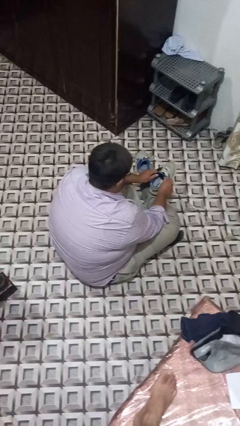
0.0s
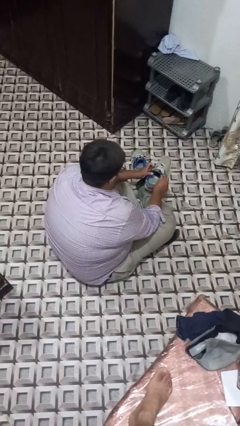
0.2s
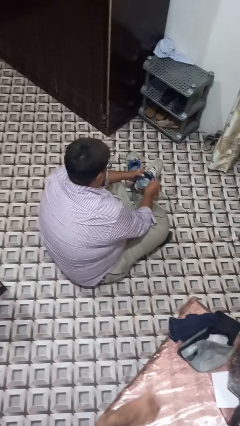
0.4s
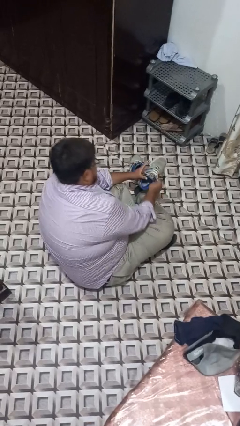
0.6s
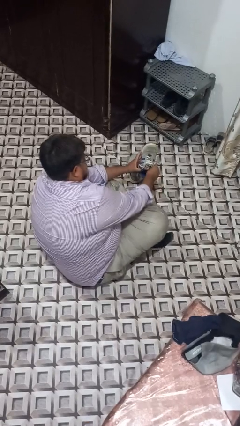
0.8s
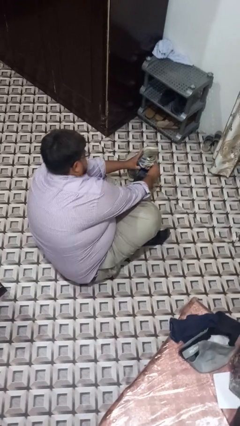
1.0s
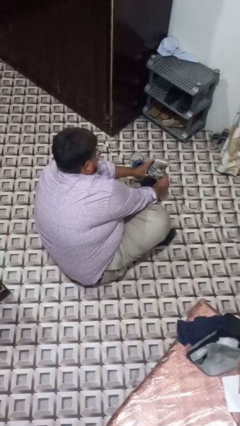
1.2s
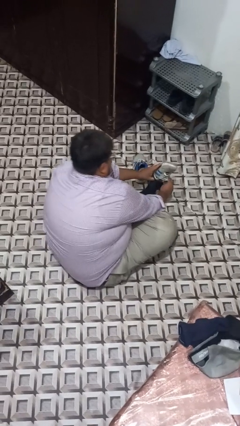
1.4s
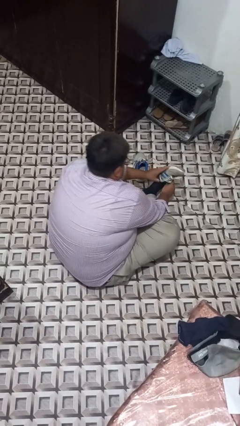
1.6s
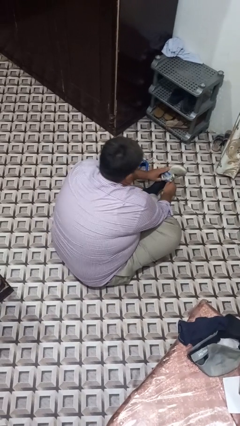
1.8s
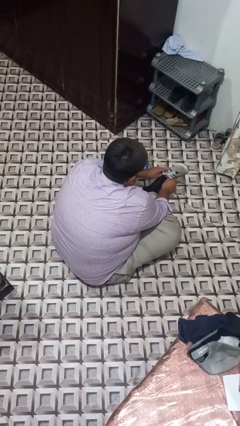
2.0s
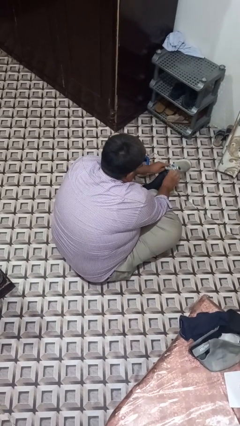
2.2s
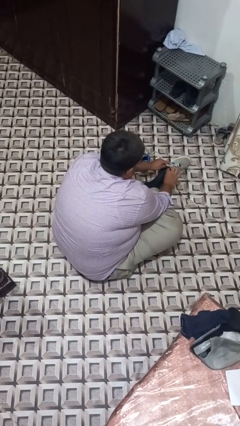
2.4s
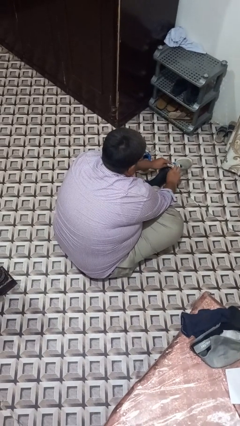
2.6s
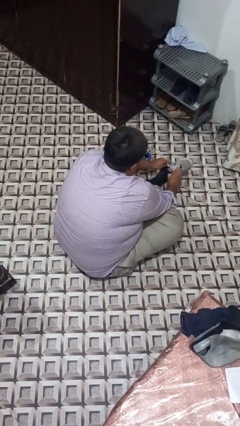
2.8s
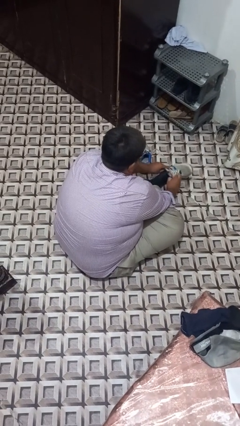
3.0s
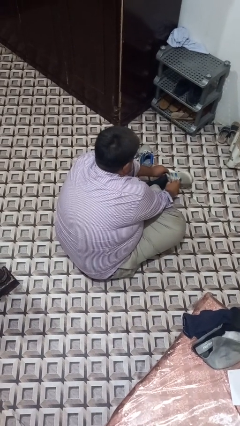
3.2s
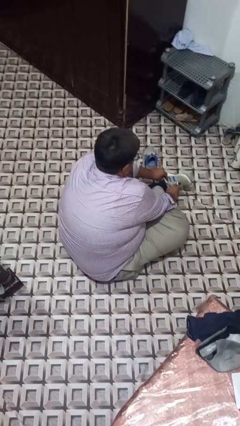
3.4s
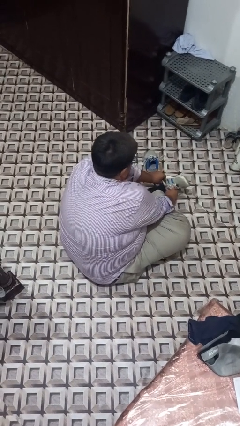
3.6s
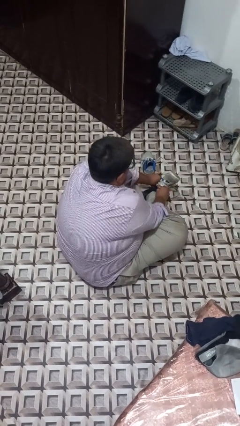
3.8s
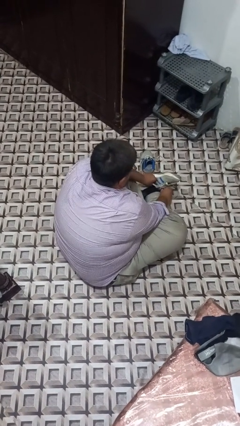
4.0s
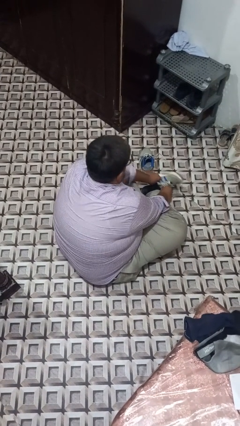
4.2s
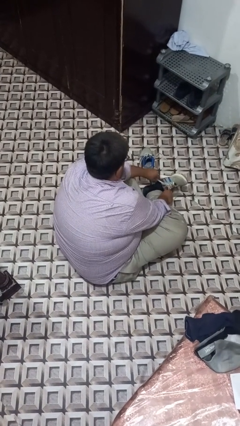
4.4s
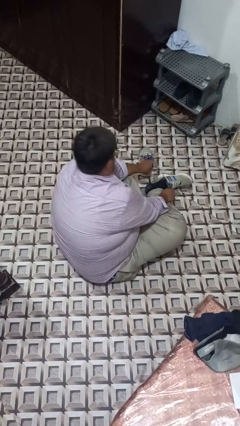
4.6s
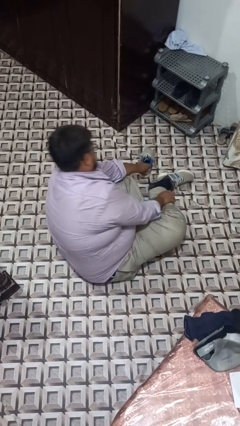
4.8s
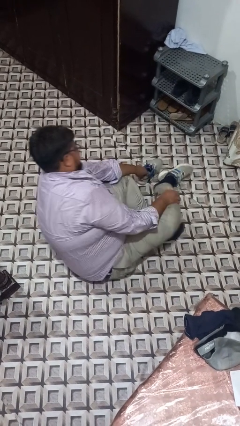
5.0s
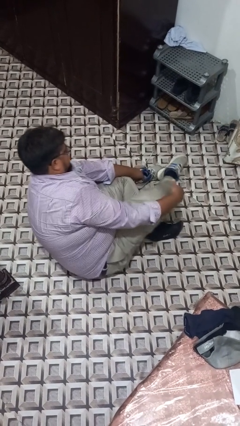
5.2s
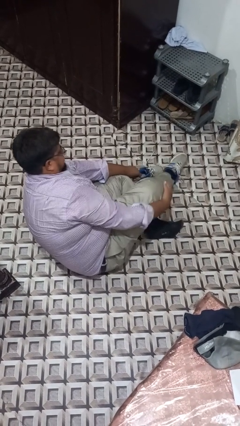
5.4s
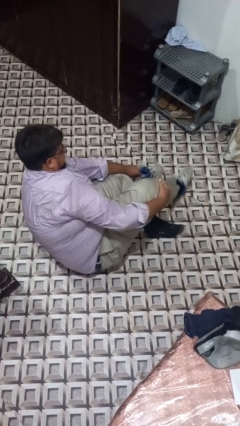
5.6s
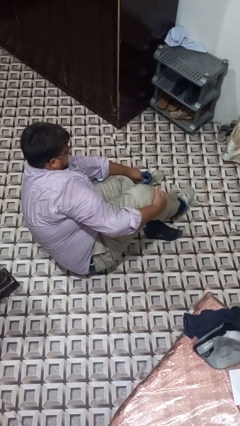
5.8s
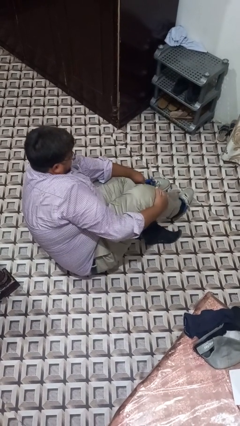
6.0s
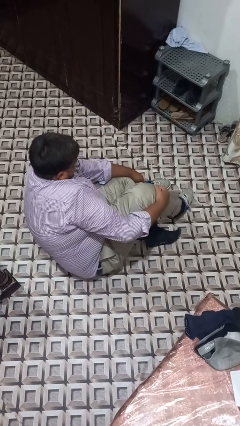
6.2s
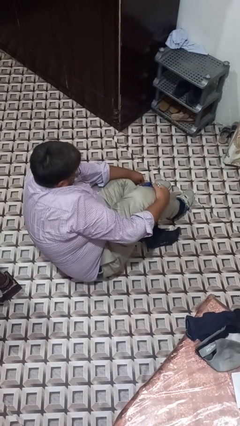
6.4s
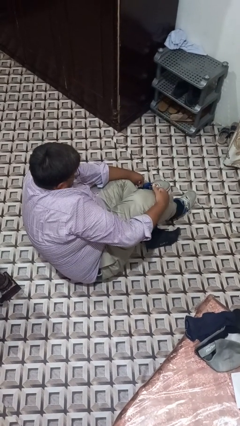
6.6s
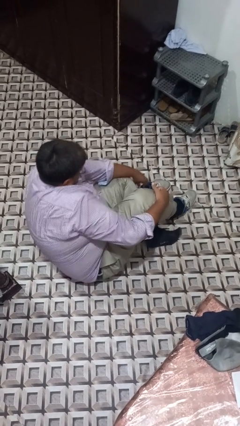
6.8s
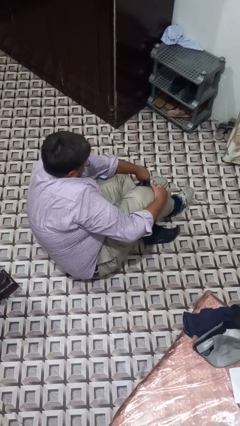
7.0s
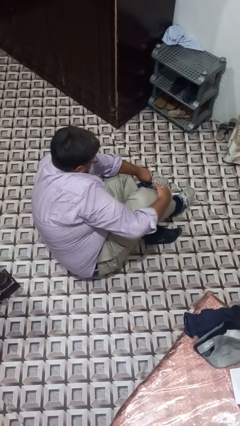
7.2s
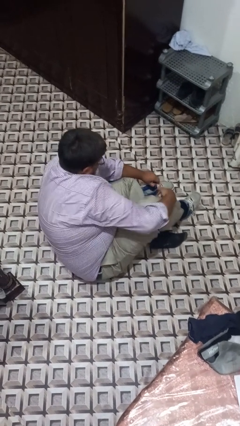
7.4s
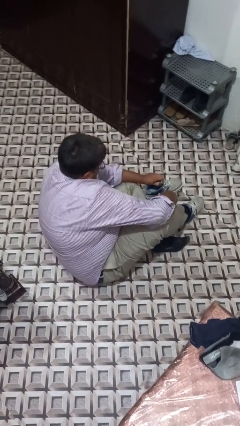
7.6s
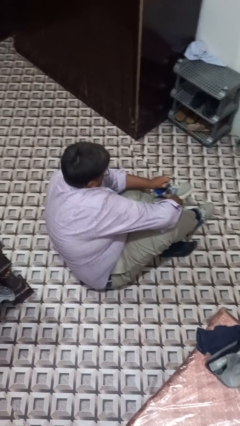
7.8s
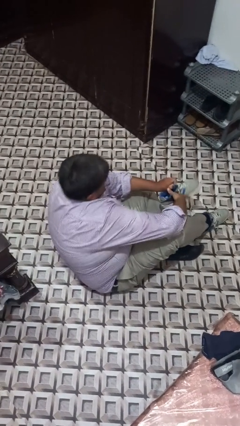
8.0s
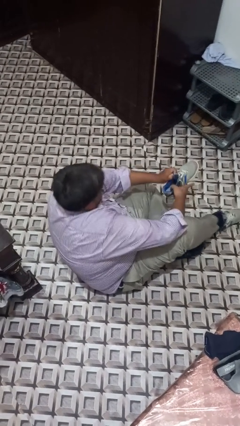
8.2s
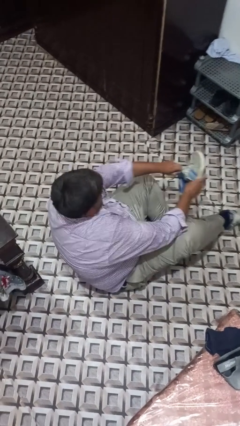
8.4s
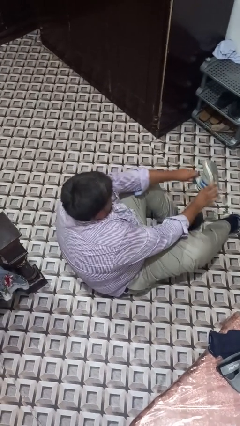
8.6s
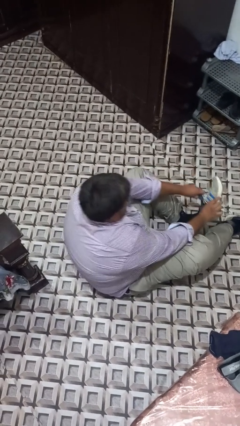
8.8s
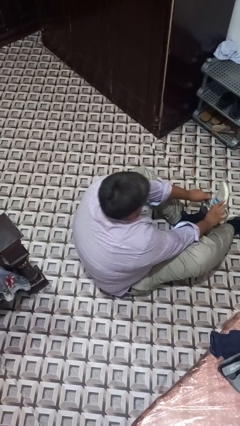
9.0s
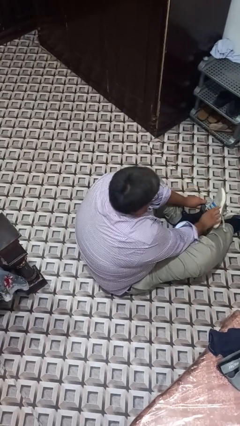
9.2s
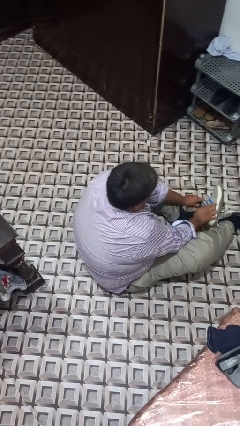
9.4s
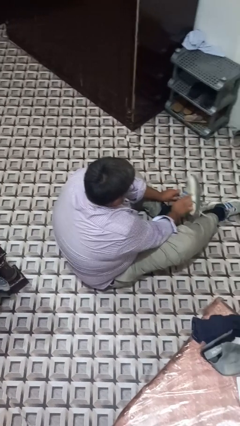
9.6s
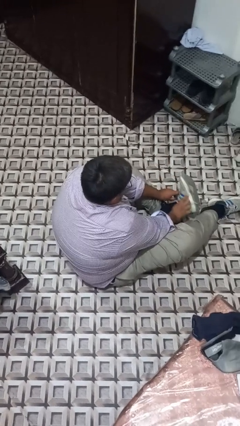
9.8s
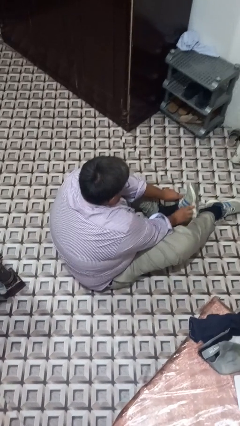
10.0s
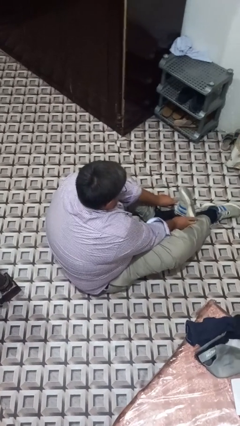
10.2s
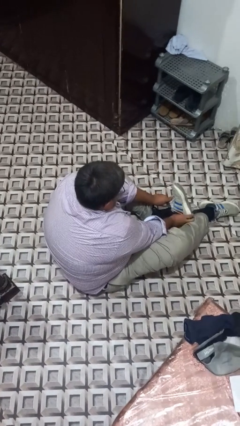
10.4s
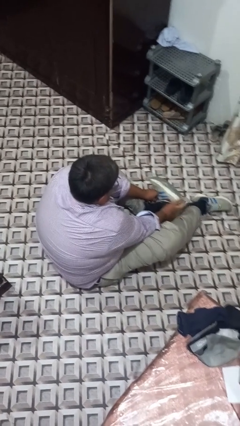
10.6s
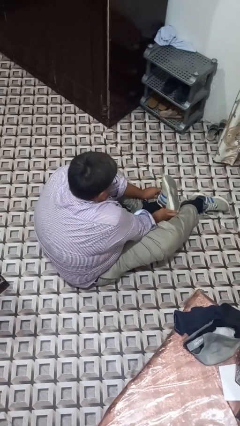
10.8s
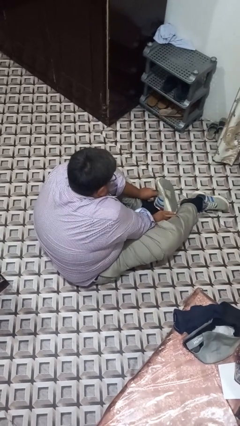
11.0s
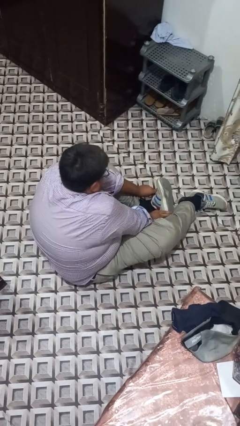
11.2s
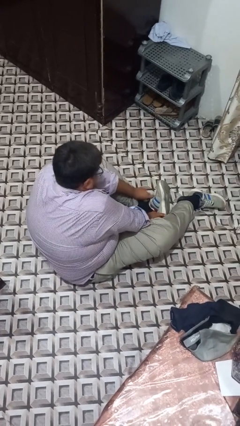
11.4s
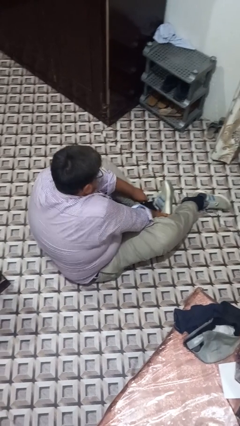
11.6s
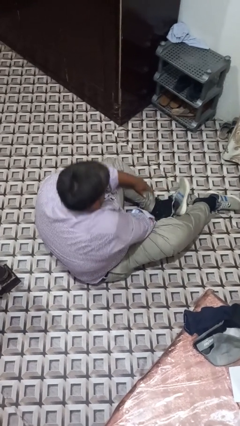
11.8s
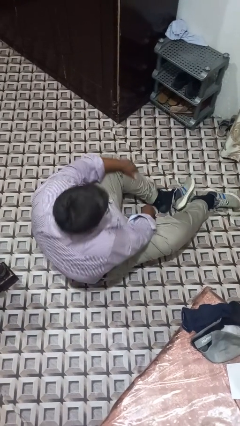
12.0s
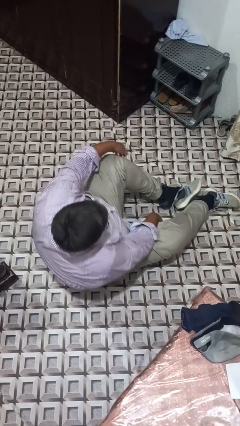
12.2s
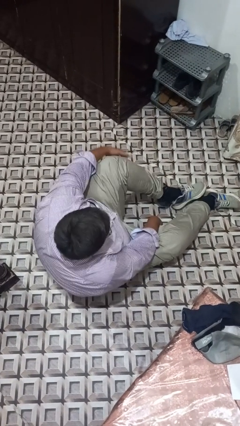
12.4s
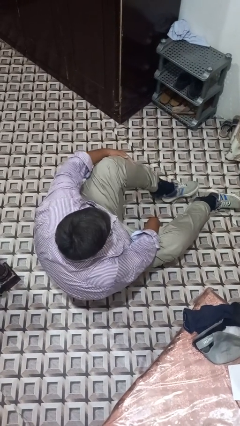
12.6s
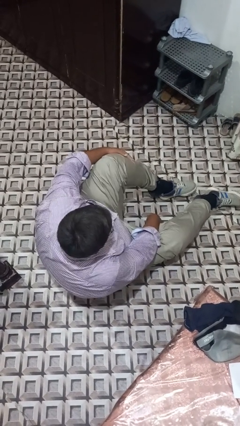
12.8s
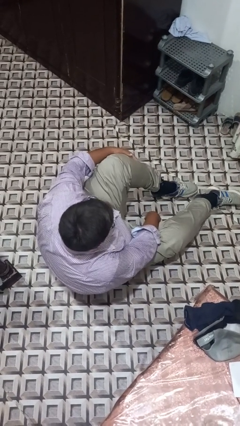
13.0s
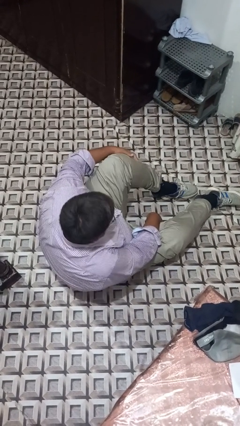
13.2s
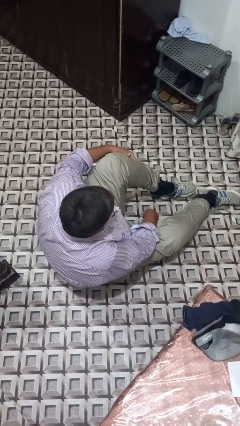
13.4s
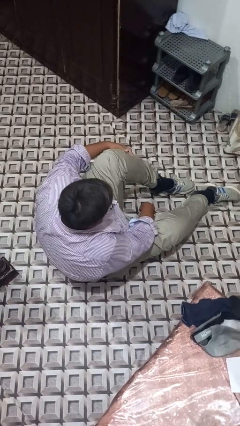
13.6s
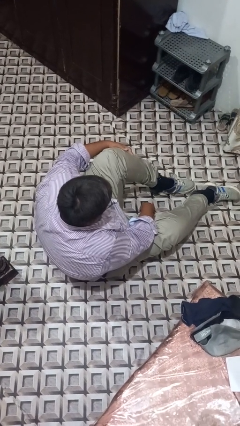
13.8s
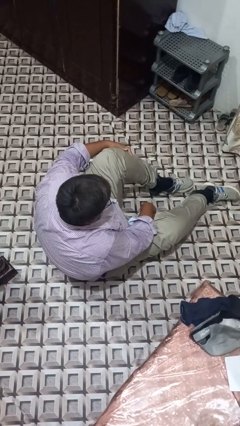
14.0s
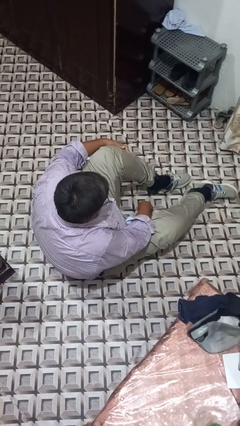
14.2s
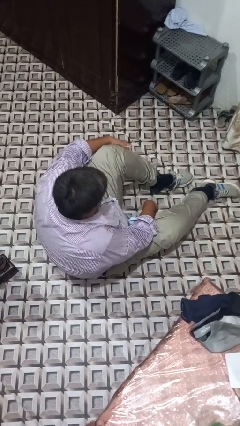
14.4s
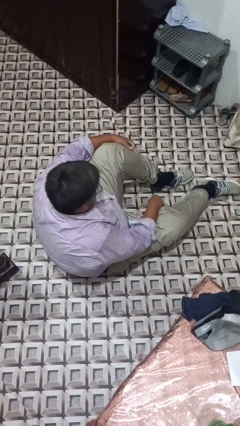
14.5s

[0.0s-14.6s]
person puts on shoes

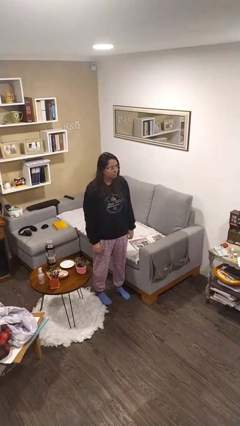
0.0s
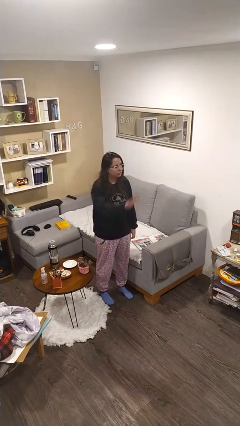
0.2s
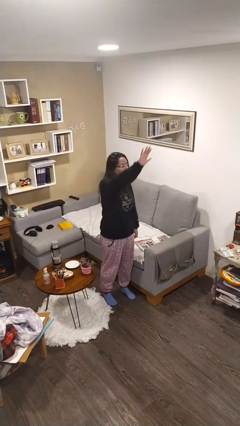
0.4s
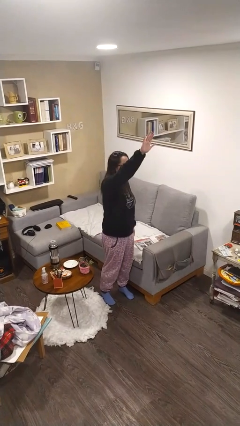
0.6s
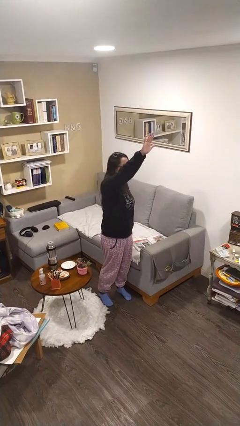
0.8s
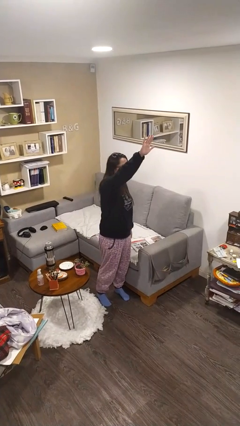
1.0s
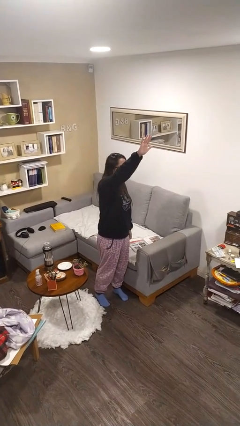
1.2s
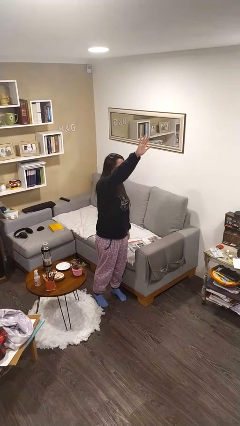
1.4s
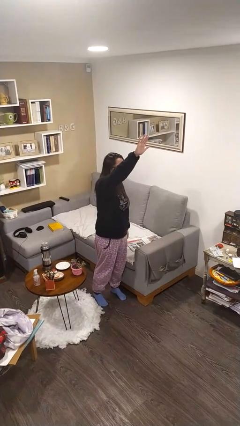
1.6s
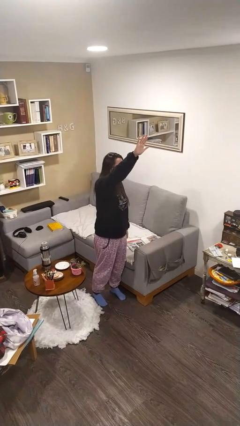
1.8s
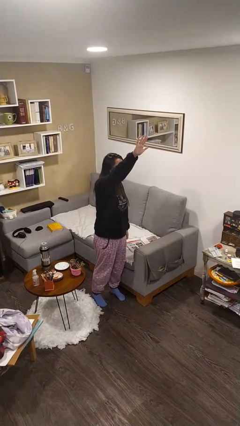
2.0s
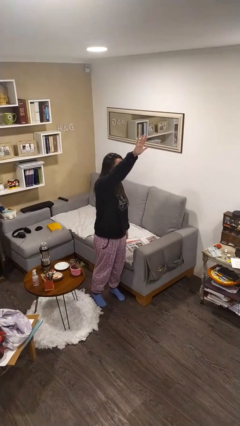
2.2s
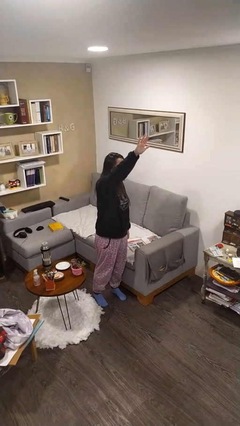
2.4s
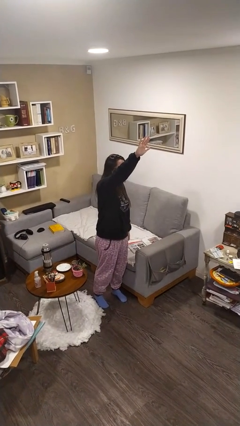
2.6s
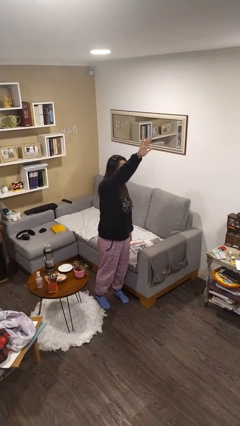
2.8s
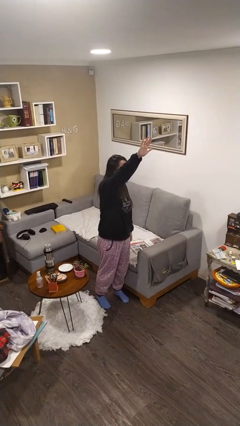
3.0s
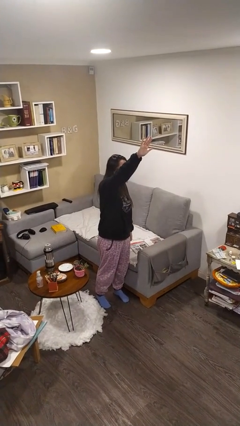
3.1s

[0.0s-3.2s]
person gestures raise hand

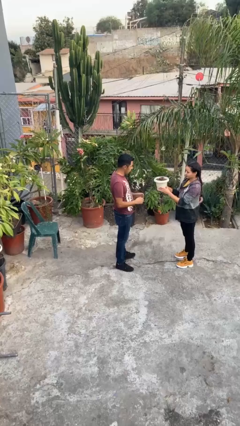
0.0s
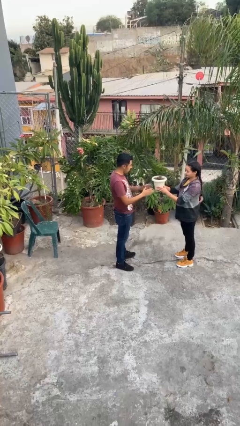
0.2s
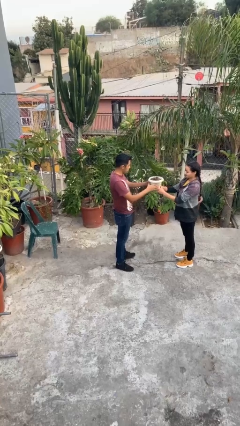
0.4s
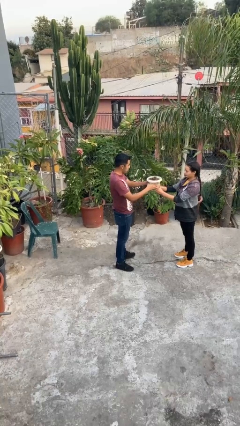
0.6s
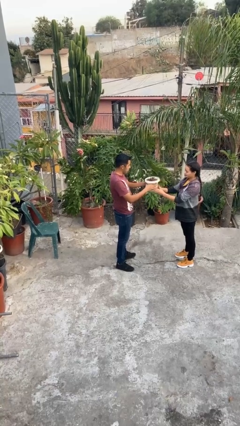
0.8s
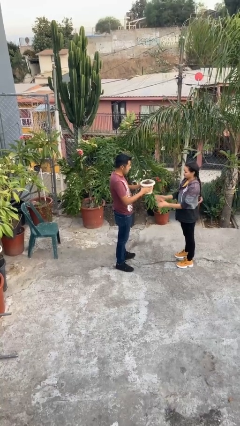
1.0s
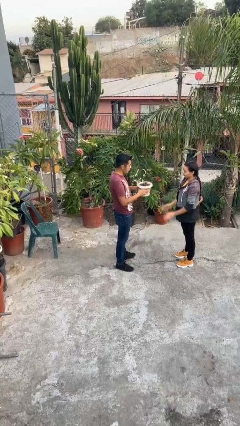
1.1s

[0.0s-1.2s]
person transfers object to person
